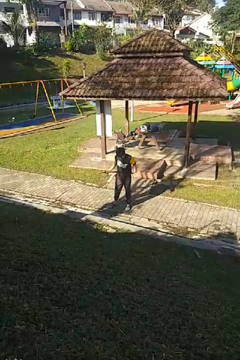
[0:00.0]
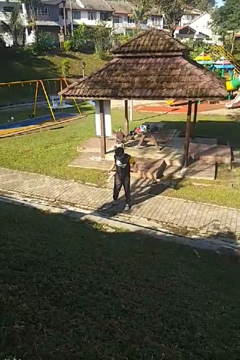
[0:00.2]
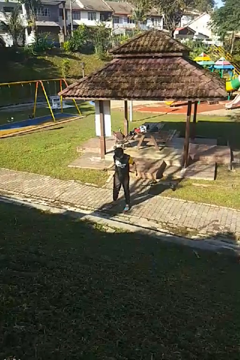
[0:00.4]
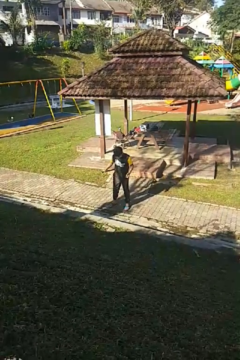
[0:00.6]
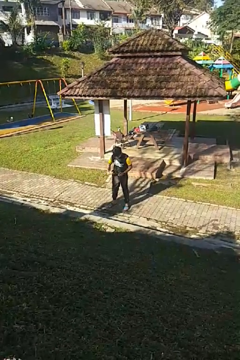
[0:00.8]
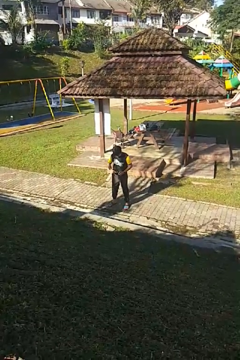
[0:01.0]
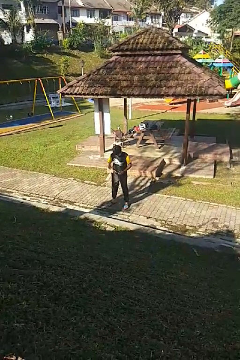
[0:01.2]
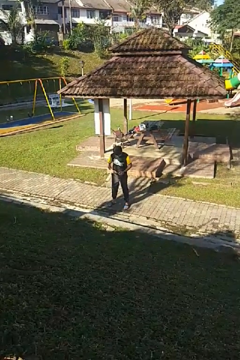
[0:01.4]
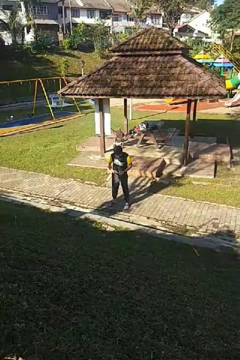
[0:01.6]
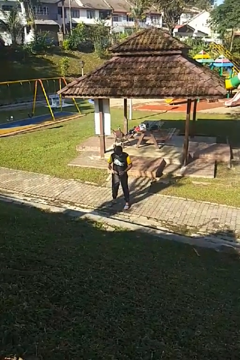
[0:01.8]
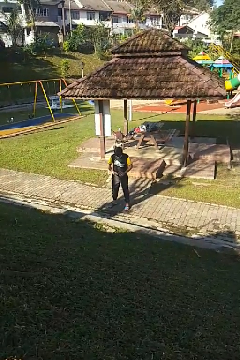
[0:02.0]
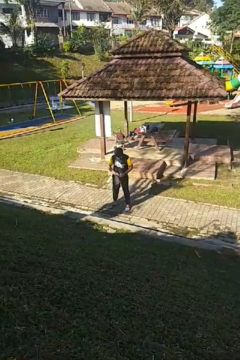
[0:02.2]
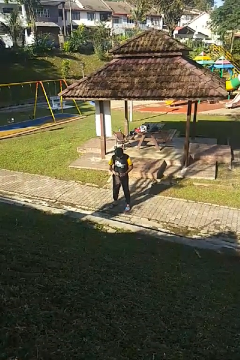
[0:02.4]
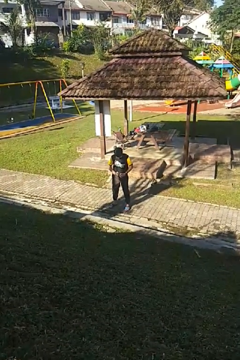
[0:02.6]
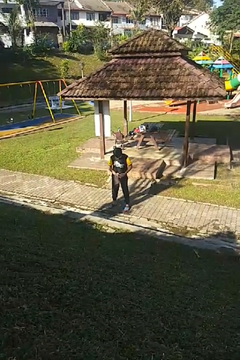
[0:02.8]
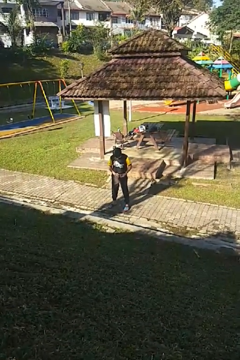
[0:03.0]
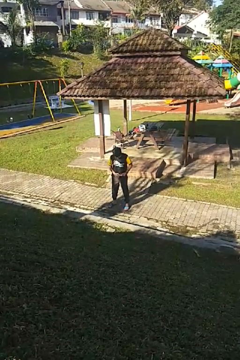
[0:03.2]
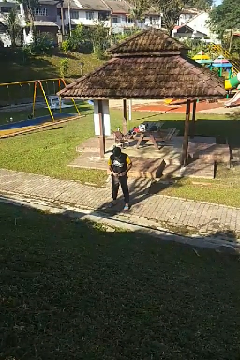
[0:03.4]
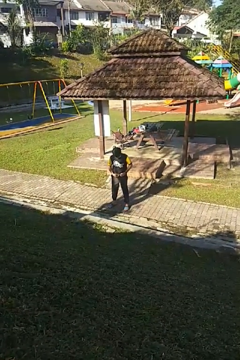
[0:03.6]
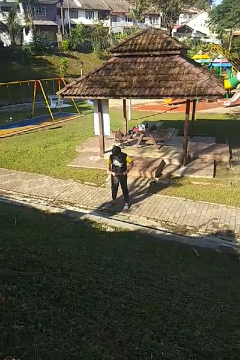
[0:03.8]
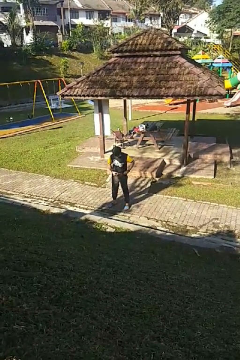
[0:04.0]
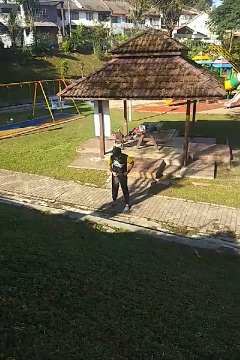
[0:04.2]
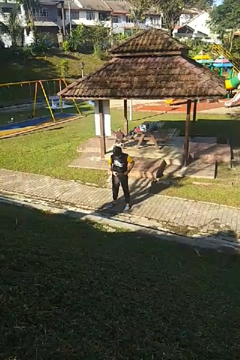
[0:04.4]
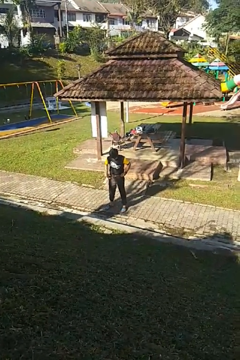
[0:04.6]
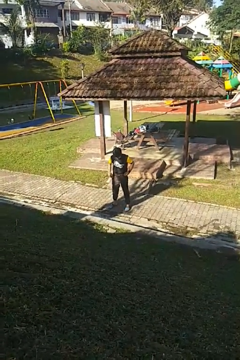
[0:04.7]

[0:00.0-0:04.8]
person puts on belt

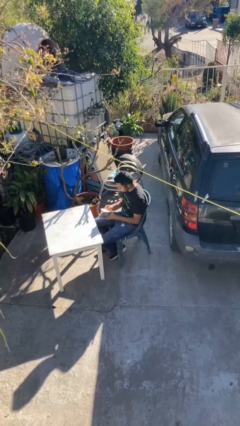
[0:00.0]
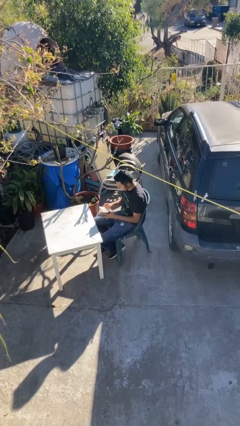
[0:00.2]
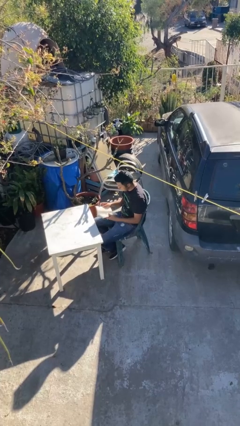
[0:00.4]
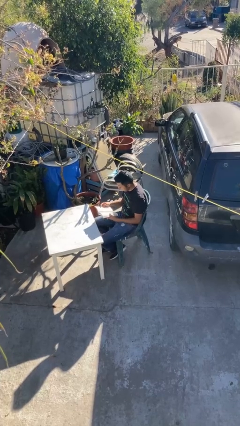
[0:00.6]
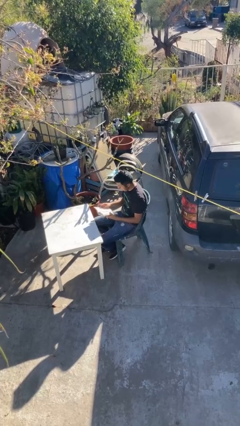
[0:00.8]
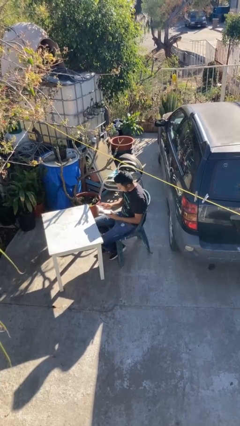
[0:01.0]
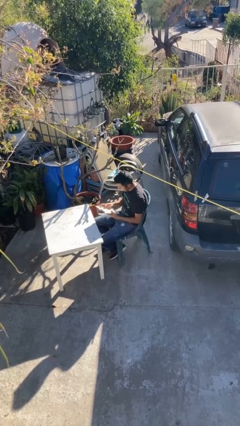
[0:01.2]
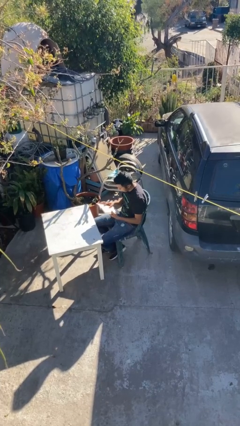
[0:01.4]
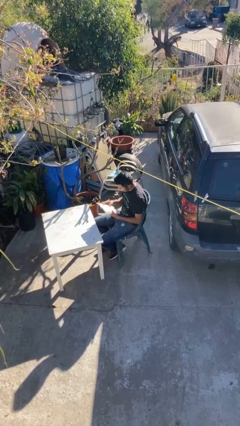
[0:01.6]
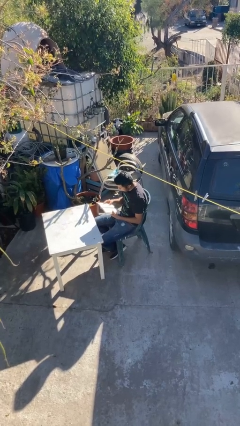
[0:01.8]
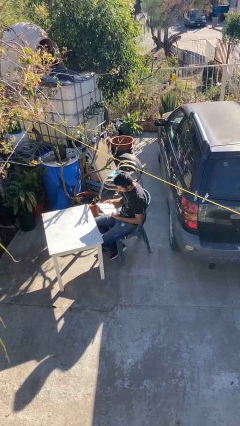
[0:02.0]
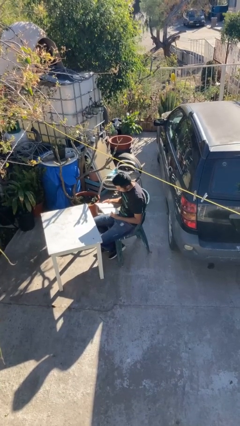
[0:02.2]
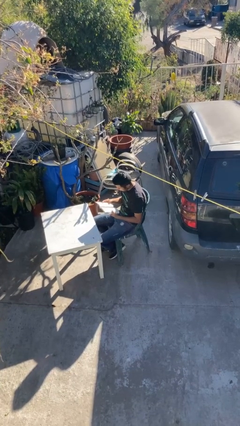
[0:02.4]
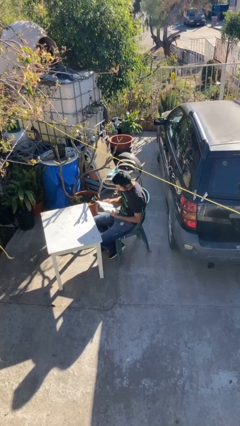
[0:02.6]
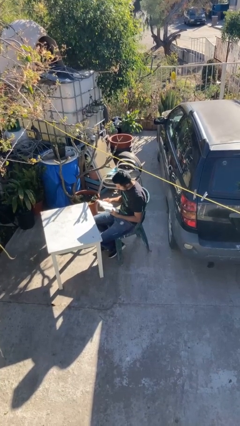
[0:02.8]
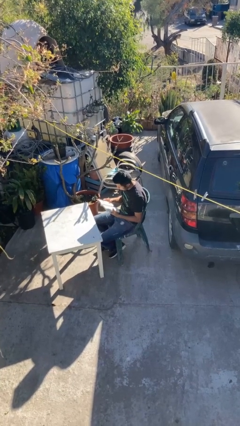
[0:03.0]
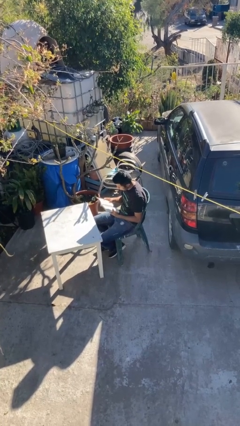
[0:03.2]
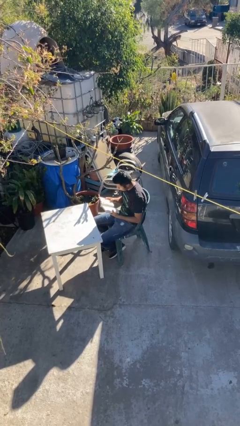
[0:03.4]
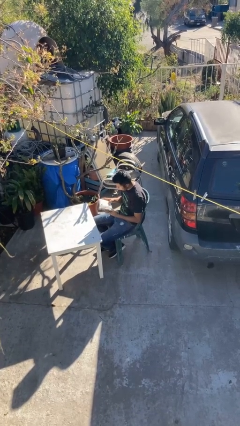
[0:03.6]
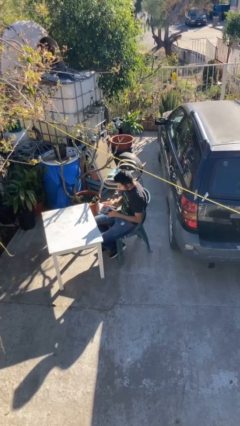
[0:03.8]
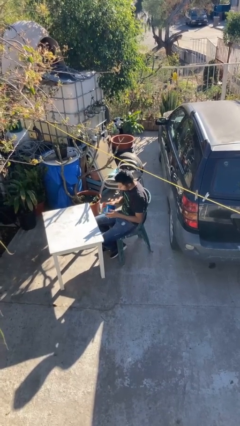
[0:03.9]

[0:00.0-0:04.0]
person reads document

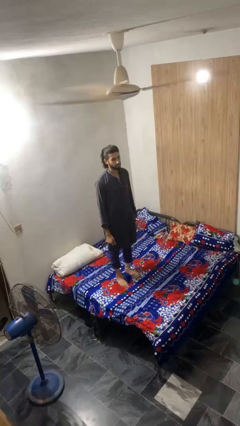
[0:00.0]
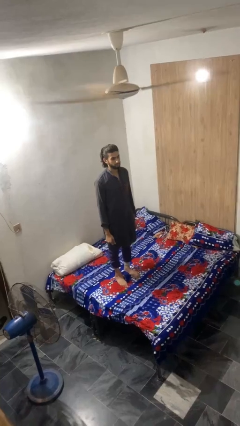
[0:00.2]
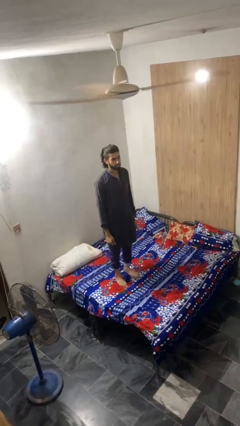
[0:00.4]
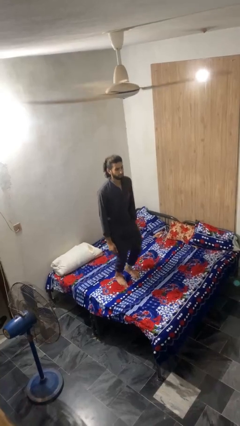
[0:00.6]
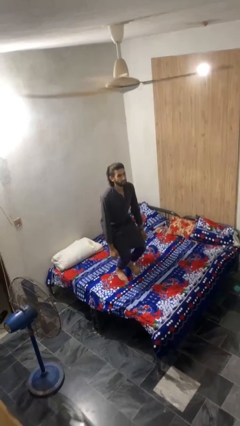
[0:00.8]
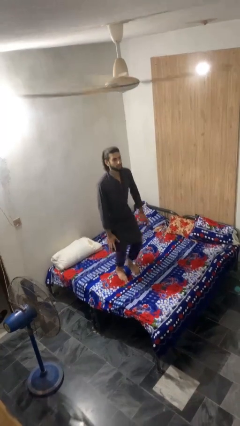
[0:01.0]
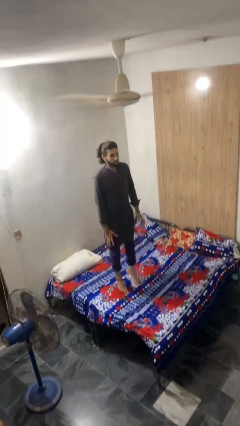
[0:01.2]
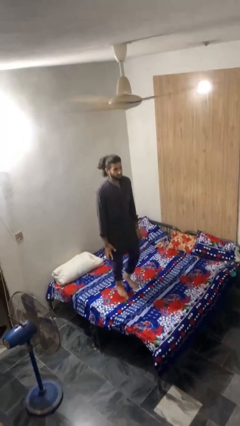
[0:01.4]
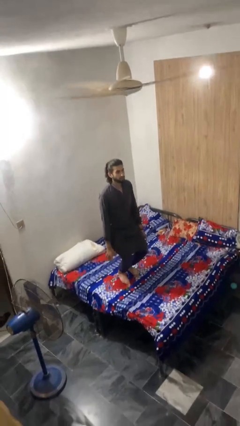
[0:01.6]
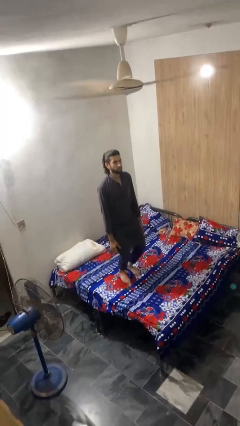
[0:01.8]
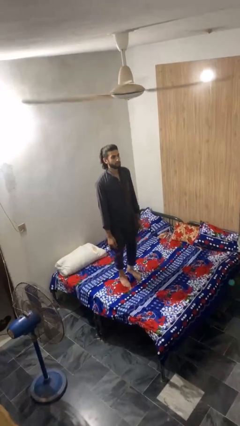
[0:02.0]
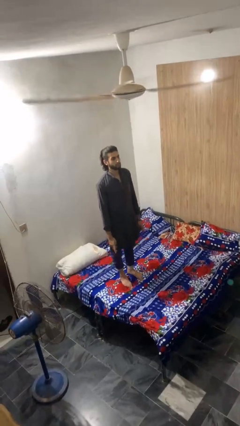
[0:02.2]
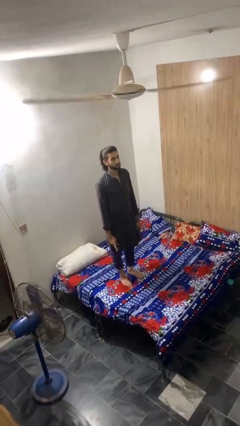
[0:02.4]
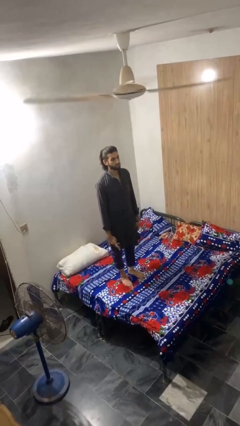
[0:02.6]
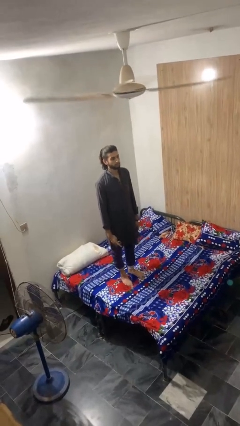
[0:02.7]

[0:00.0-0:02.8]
person jumps on bed

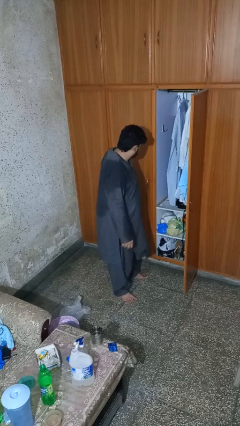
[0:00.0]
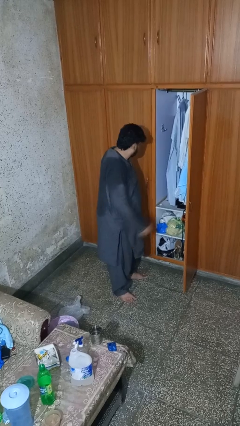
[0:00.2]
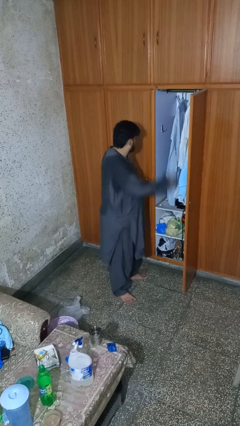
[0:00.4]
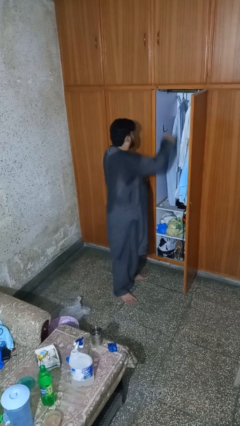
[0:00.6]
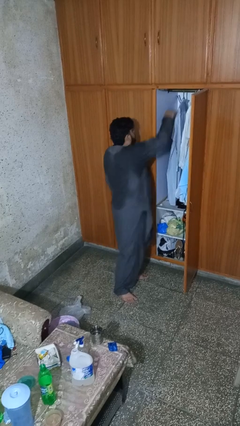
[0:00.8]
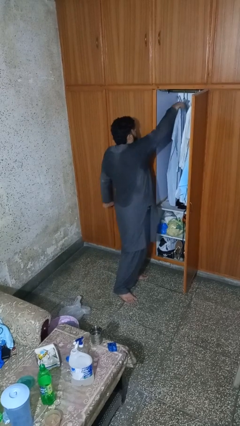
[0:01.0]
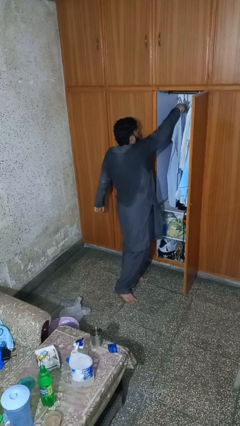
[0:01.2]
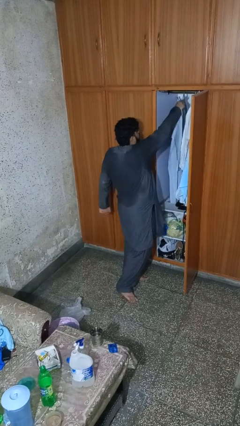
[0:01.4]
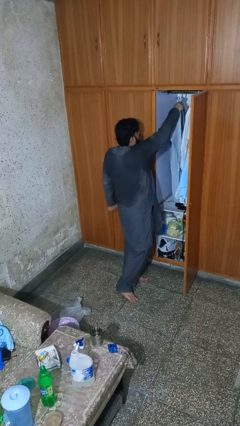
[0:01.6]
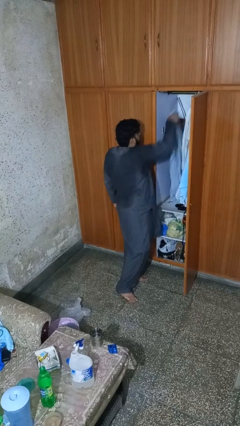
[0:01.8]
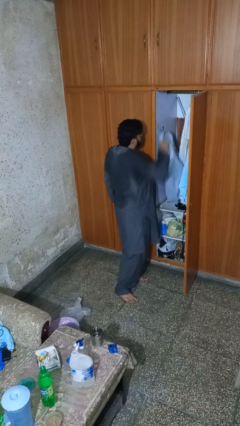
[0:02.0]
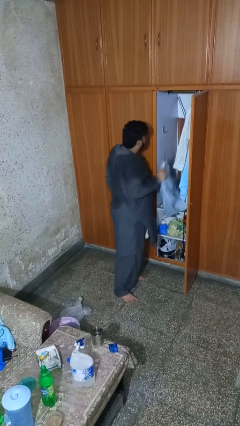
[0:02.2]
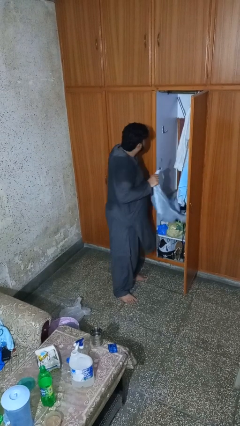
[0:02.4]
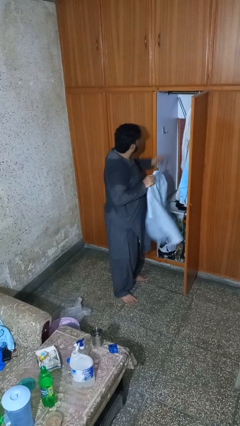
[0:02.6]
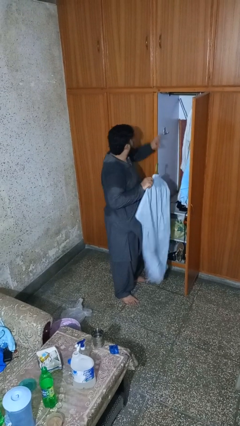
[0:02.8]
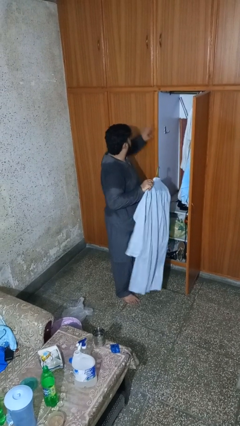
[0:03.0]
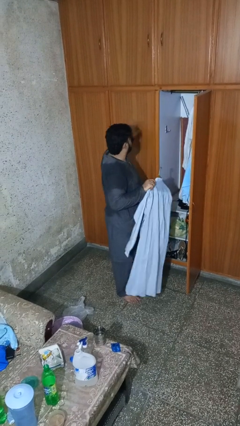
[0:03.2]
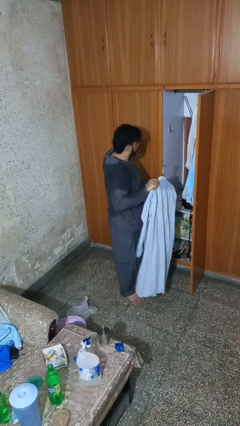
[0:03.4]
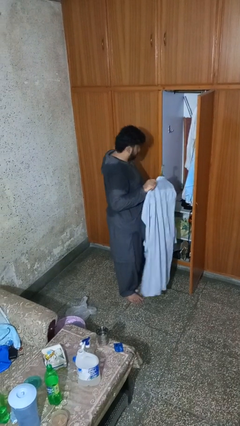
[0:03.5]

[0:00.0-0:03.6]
person takes clothes from closet

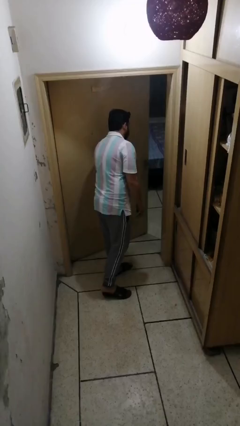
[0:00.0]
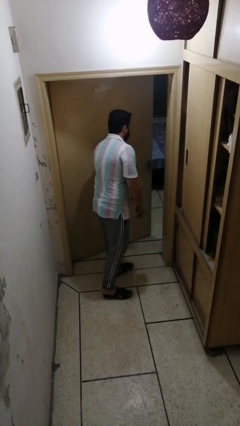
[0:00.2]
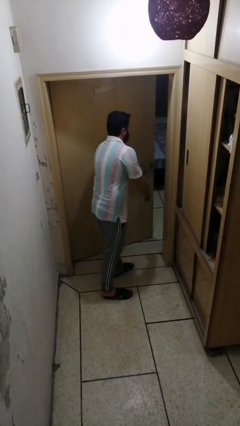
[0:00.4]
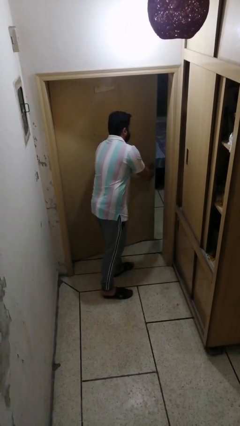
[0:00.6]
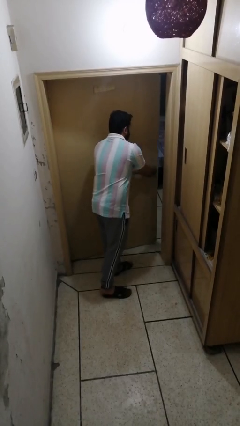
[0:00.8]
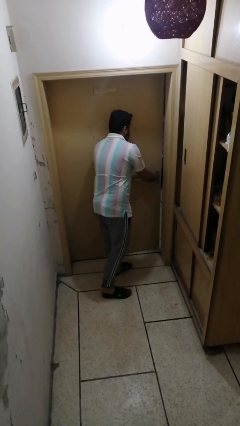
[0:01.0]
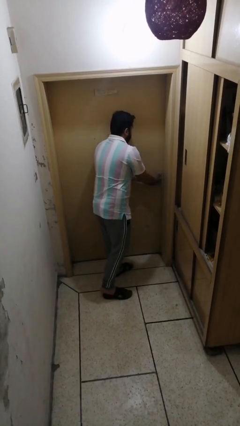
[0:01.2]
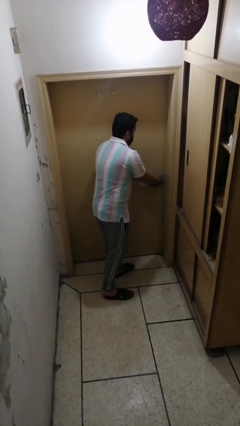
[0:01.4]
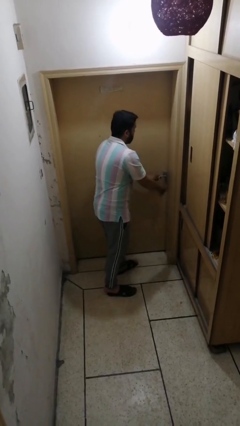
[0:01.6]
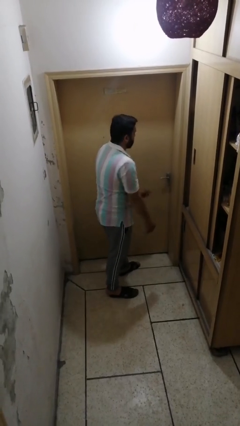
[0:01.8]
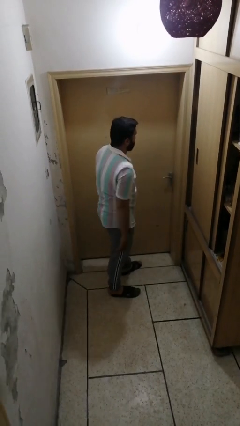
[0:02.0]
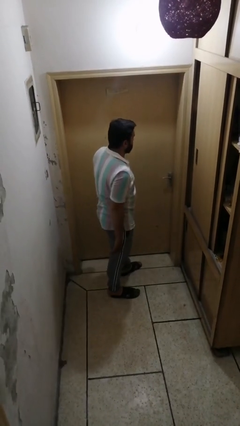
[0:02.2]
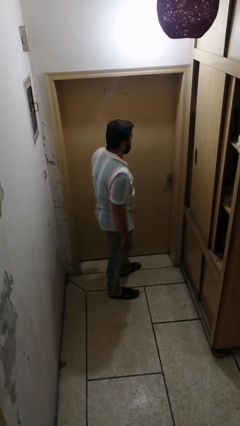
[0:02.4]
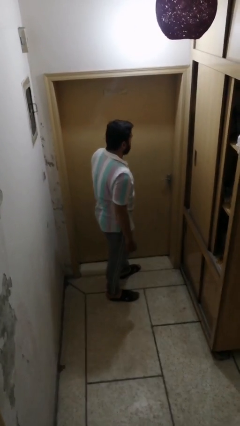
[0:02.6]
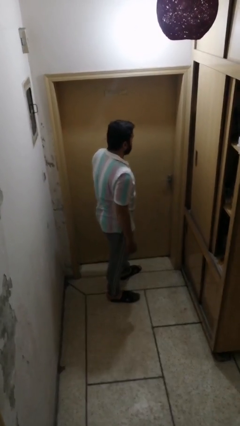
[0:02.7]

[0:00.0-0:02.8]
person closes facility door

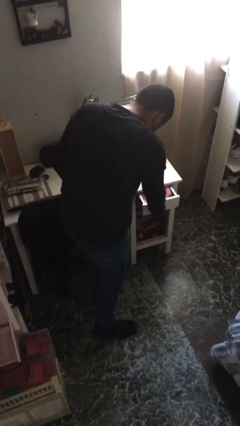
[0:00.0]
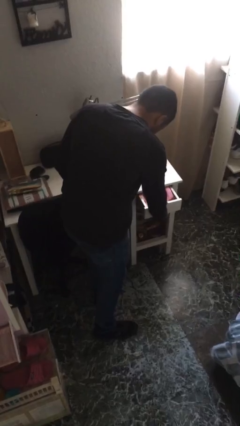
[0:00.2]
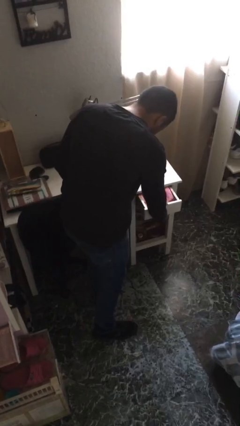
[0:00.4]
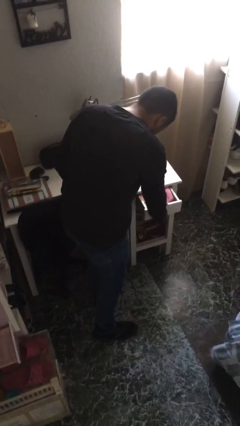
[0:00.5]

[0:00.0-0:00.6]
person opens dresser drawer
